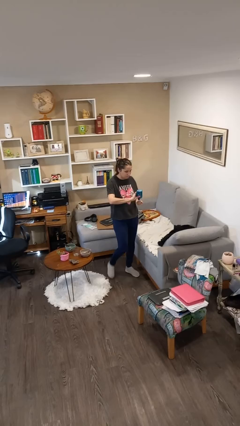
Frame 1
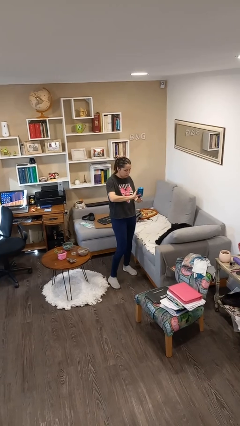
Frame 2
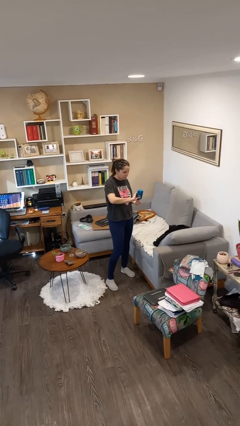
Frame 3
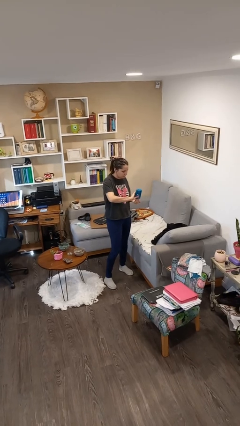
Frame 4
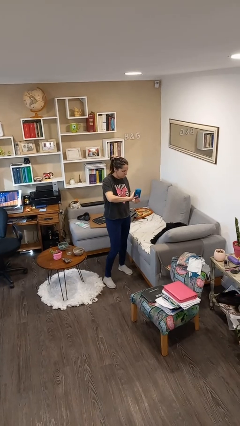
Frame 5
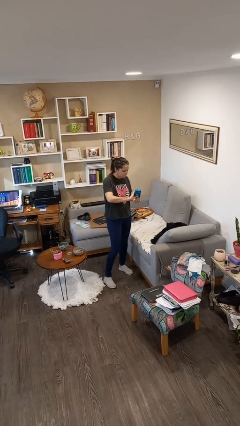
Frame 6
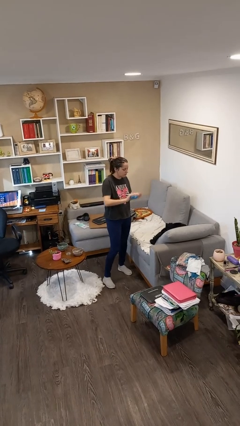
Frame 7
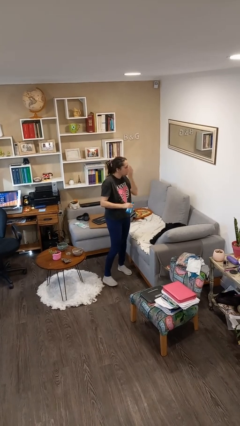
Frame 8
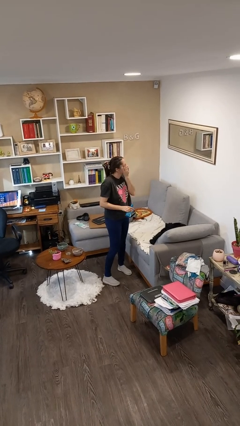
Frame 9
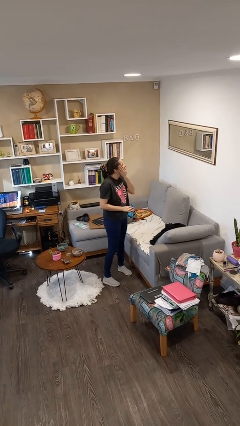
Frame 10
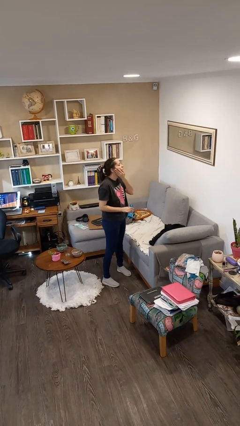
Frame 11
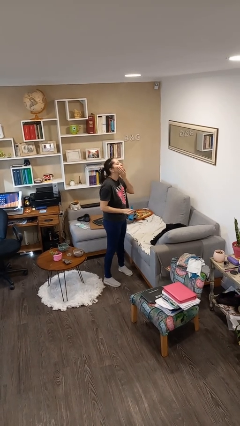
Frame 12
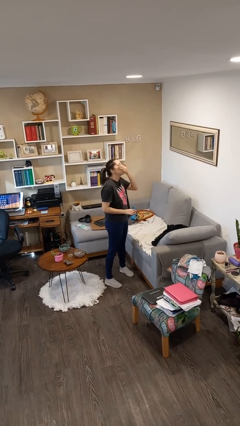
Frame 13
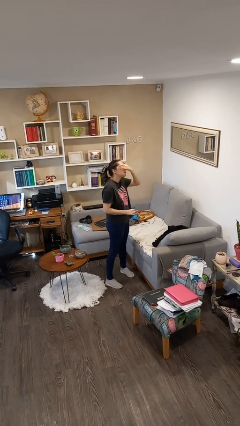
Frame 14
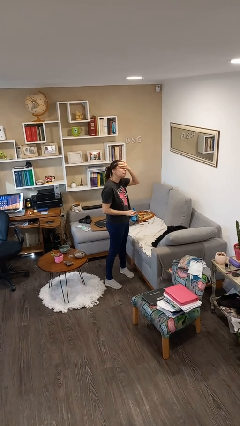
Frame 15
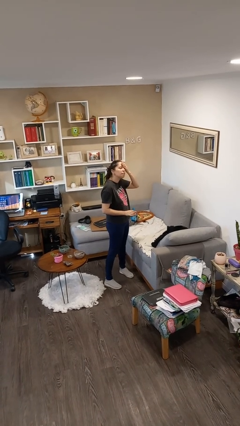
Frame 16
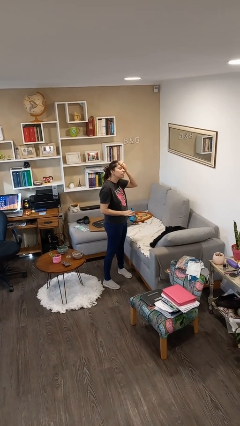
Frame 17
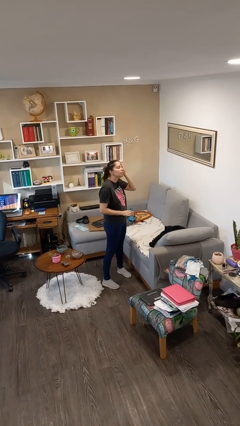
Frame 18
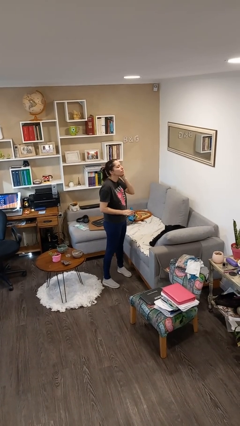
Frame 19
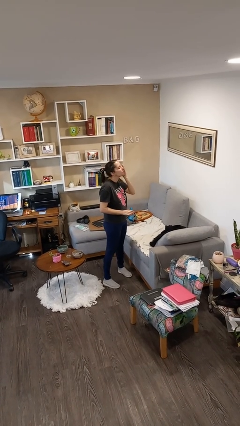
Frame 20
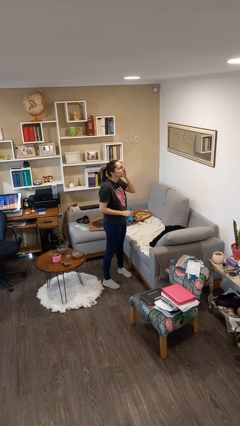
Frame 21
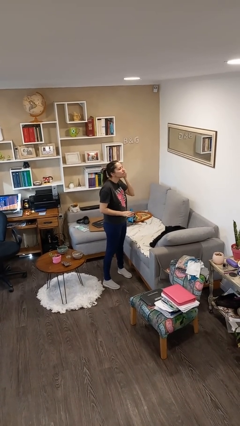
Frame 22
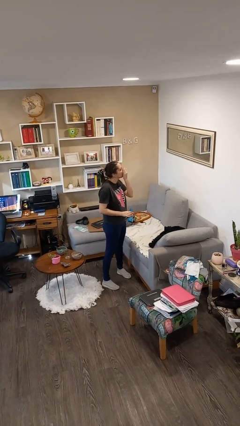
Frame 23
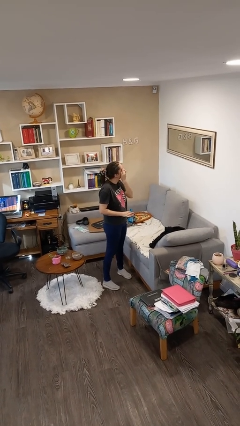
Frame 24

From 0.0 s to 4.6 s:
person applies facial moisturizer

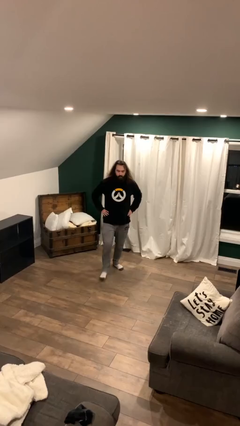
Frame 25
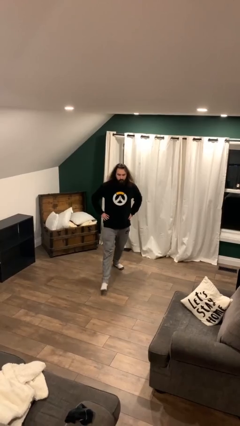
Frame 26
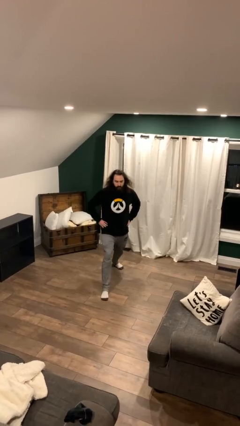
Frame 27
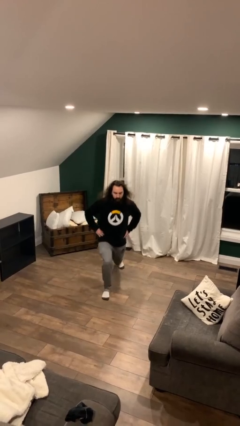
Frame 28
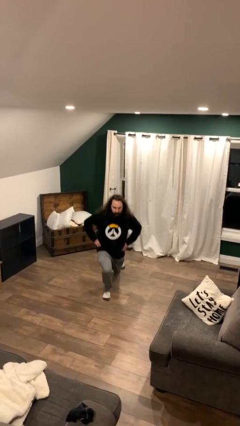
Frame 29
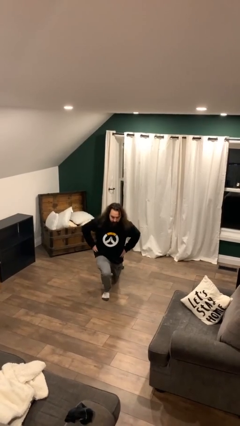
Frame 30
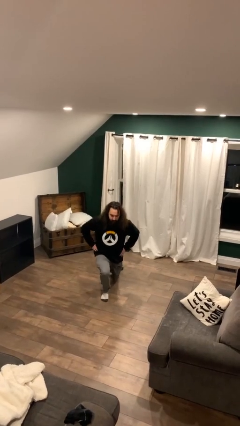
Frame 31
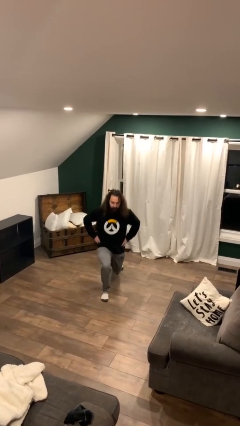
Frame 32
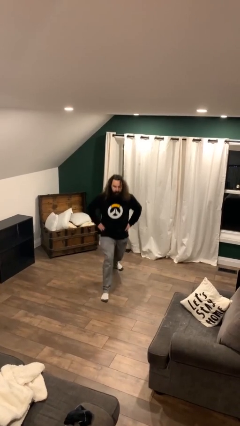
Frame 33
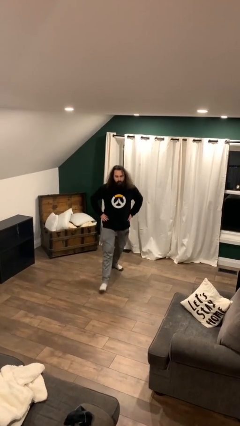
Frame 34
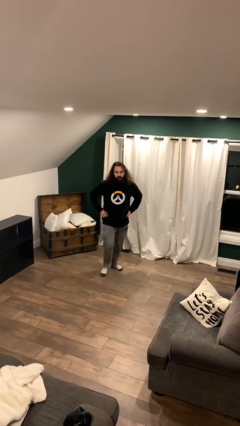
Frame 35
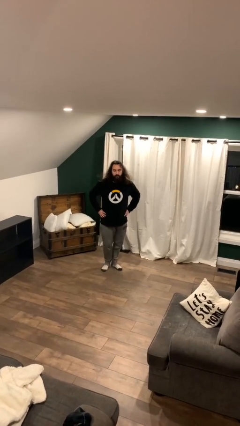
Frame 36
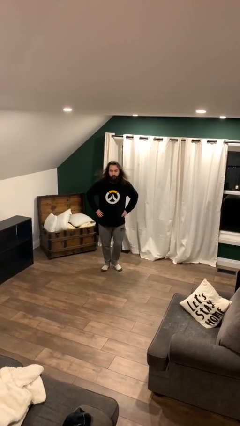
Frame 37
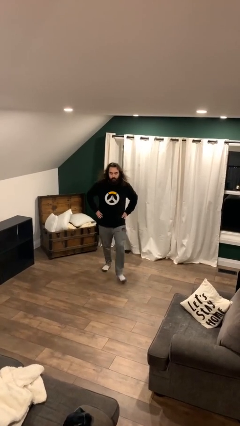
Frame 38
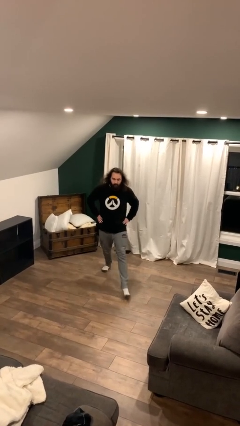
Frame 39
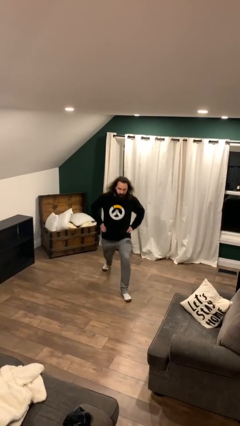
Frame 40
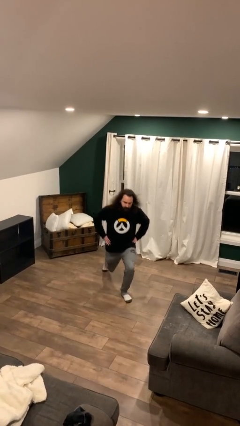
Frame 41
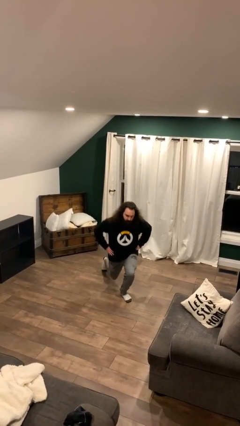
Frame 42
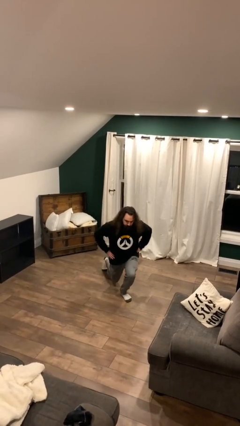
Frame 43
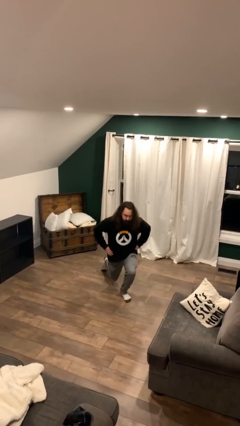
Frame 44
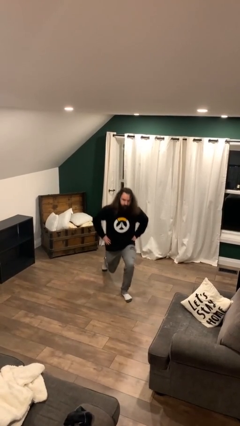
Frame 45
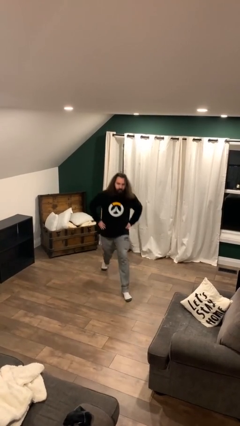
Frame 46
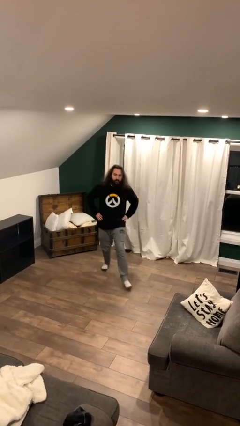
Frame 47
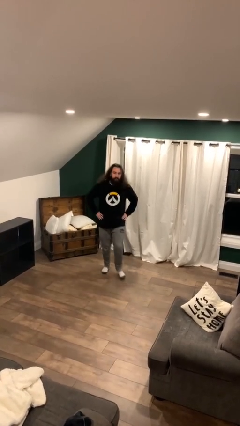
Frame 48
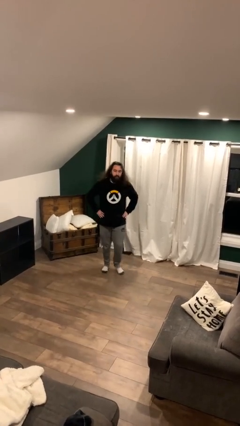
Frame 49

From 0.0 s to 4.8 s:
person exercises with lunges

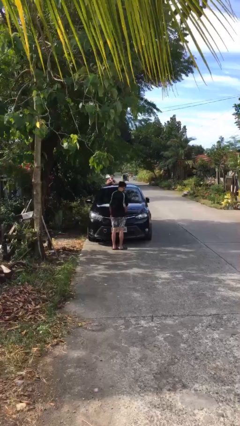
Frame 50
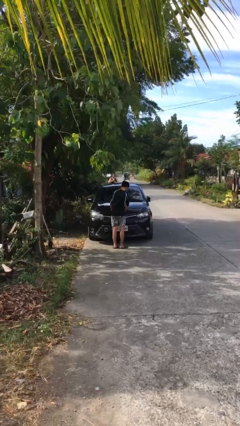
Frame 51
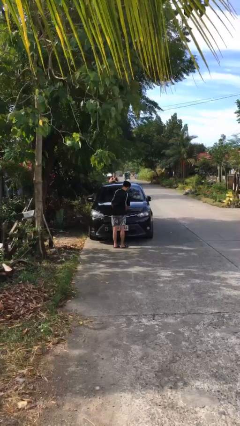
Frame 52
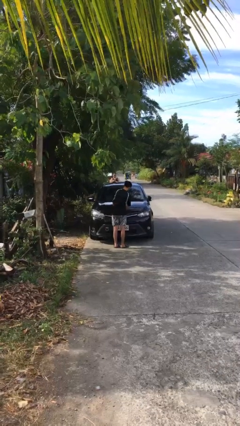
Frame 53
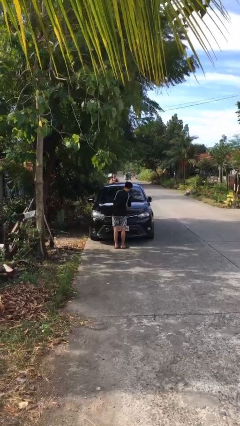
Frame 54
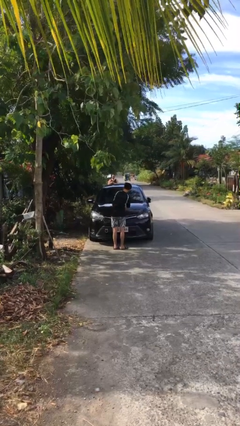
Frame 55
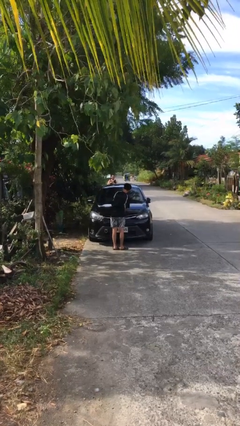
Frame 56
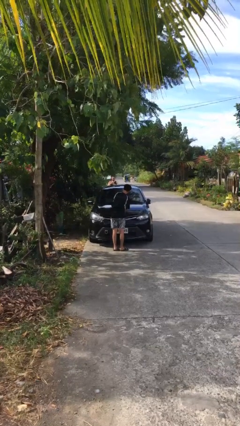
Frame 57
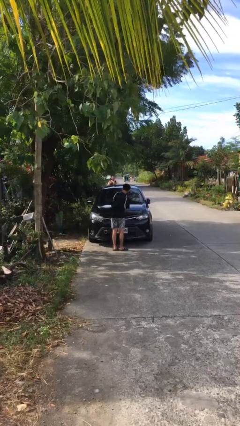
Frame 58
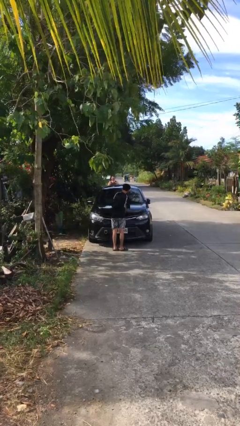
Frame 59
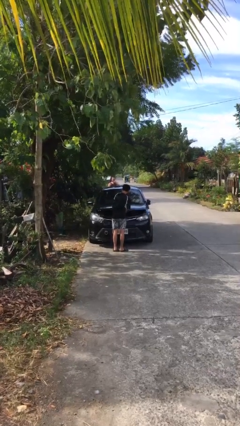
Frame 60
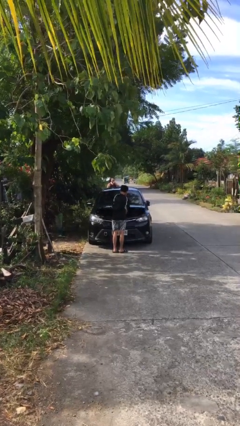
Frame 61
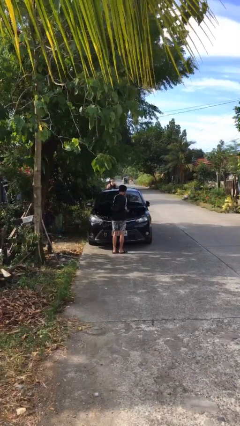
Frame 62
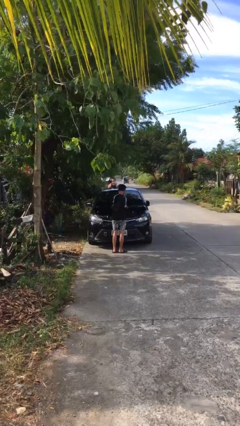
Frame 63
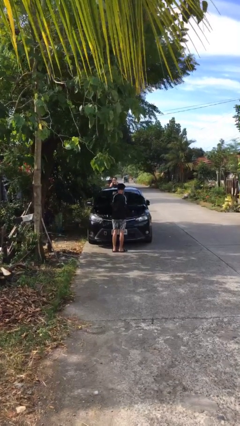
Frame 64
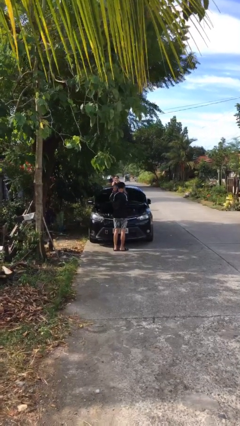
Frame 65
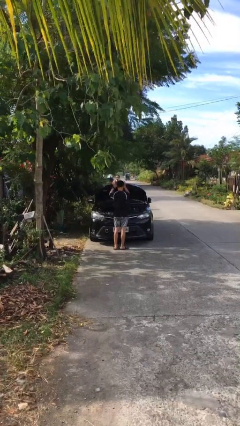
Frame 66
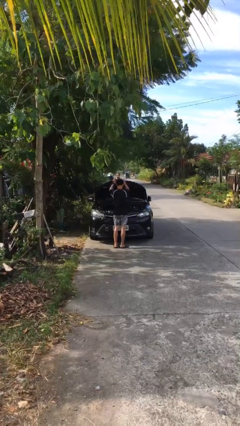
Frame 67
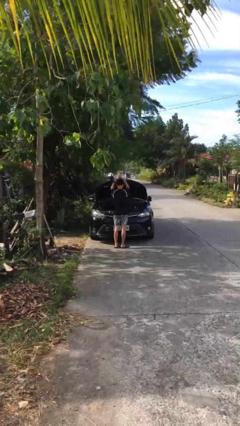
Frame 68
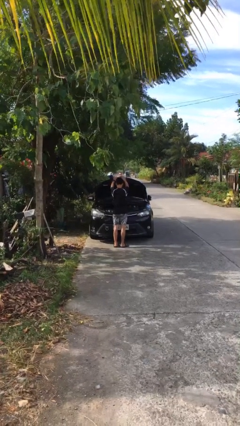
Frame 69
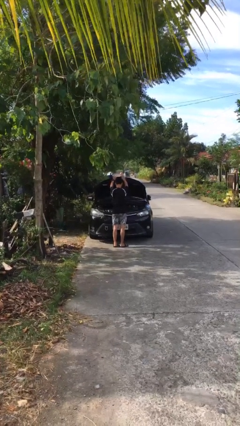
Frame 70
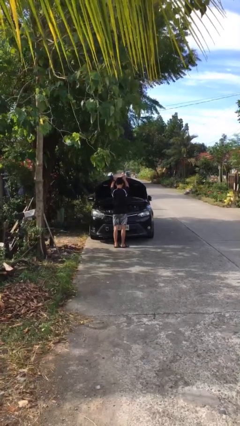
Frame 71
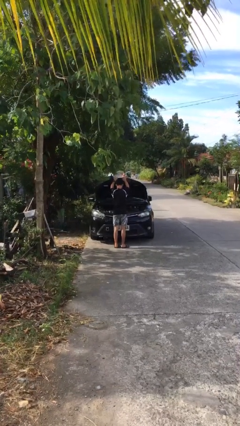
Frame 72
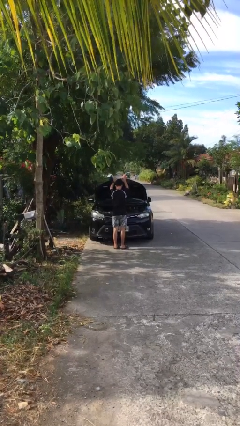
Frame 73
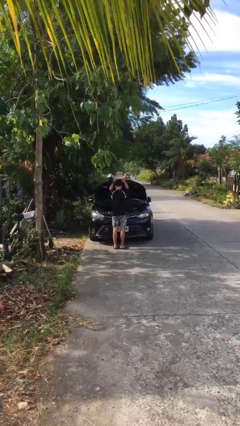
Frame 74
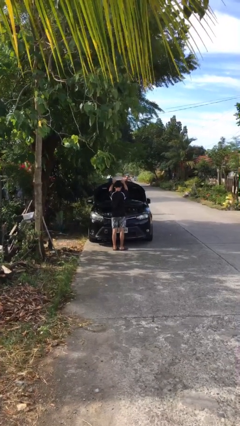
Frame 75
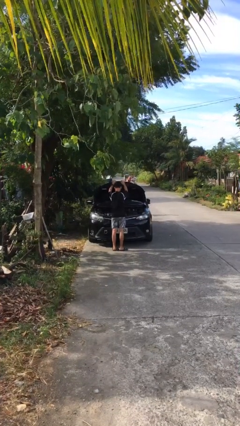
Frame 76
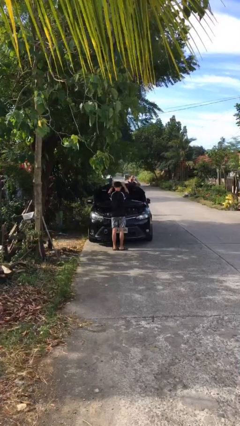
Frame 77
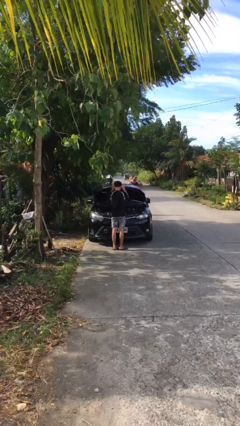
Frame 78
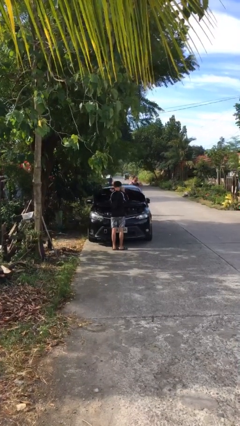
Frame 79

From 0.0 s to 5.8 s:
person opens car hood

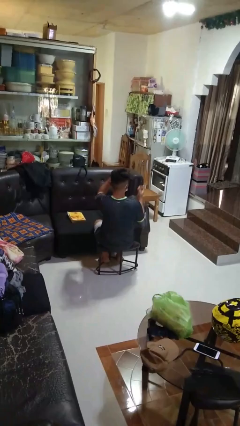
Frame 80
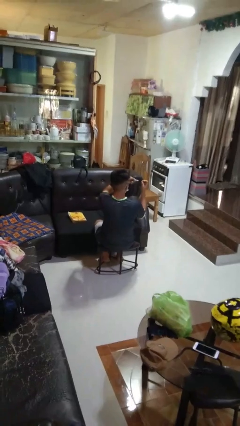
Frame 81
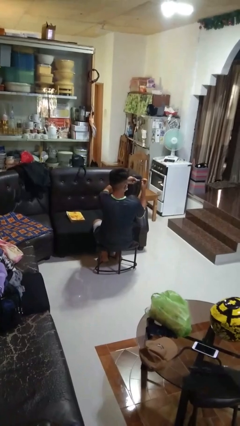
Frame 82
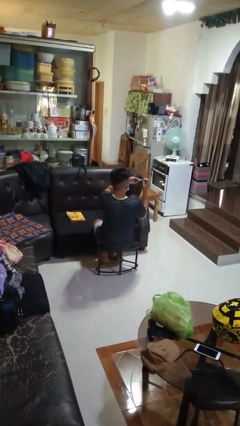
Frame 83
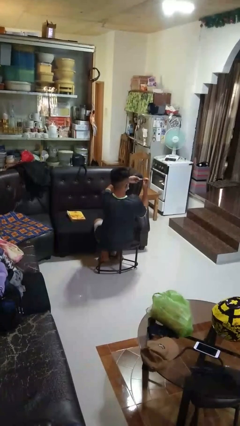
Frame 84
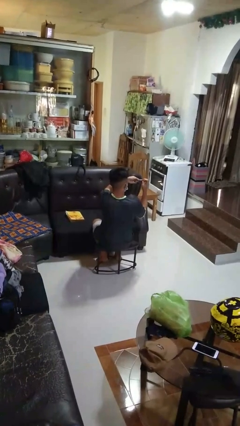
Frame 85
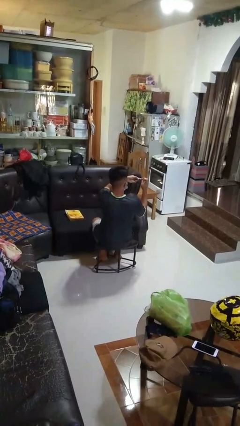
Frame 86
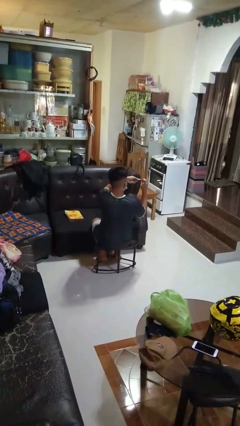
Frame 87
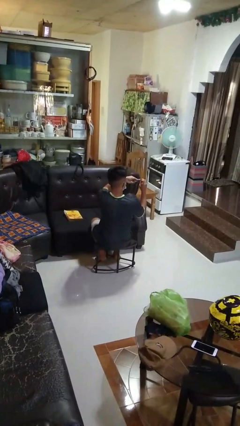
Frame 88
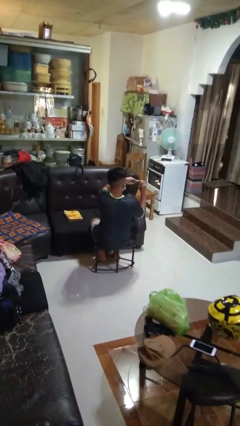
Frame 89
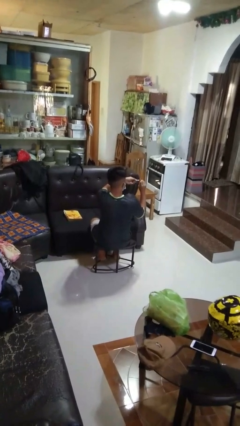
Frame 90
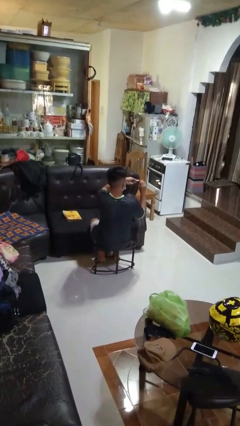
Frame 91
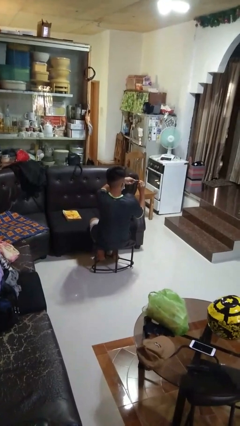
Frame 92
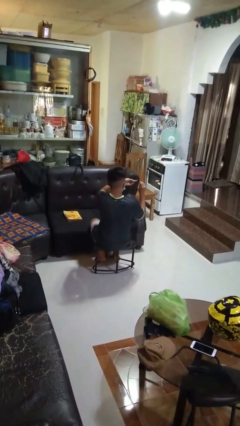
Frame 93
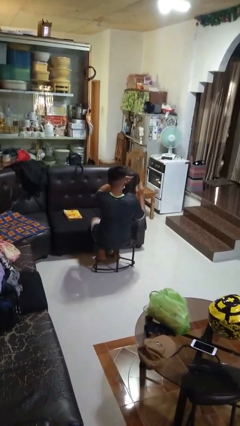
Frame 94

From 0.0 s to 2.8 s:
person clips fingernails
